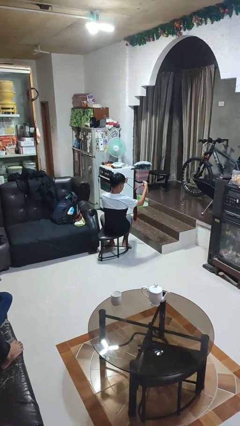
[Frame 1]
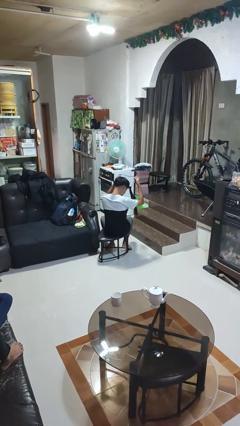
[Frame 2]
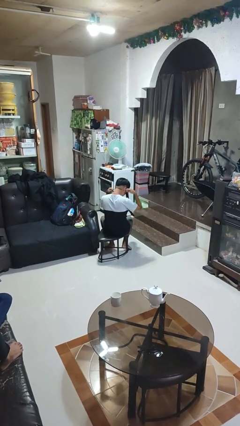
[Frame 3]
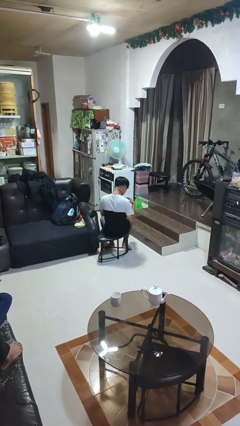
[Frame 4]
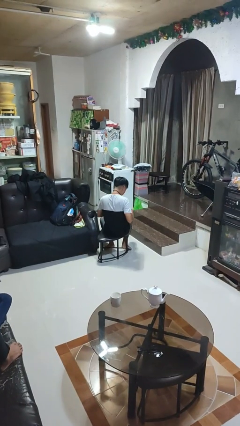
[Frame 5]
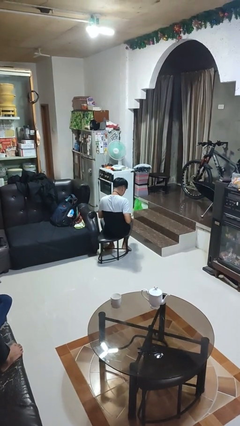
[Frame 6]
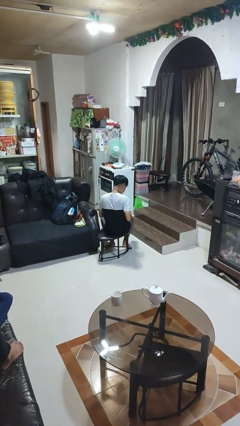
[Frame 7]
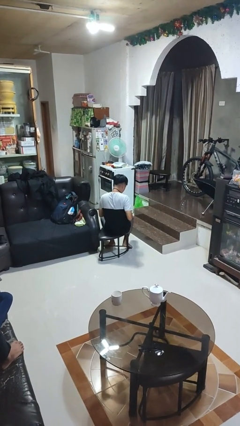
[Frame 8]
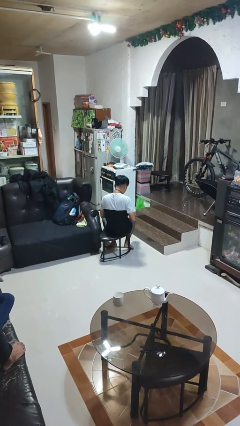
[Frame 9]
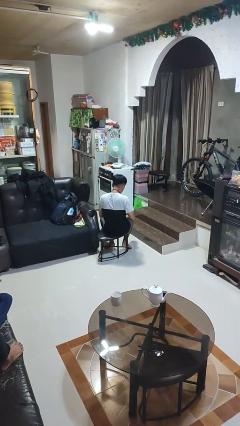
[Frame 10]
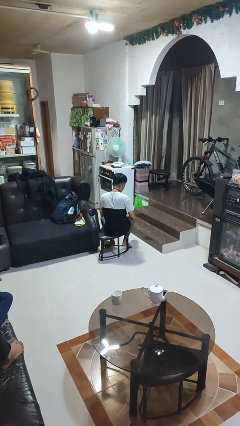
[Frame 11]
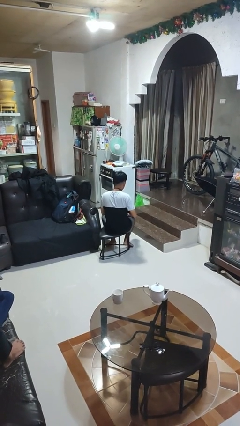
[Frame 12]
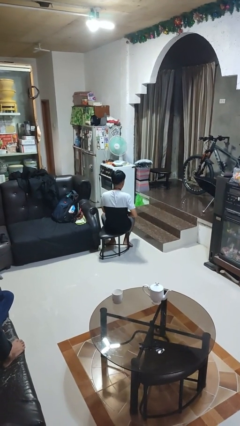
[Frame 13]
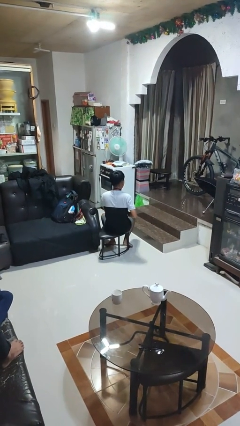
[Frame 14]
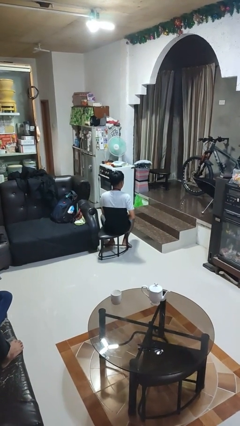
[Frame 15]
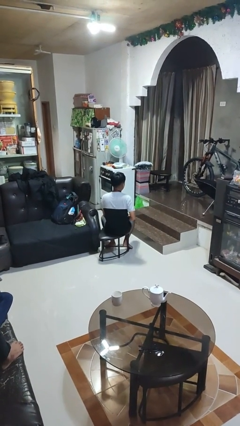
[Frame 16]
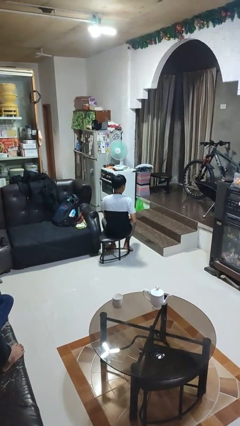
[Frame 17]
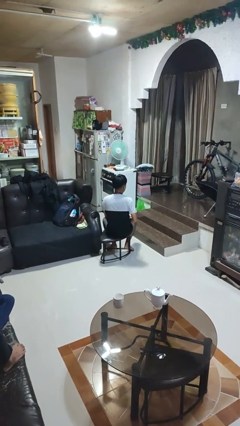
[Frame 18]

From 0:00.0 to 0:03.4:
person puts on necktie

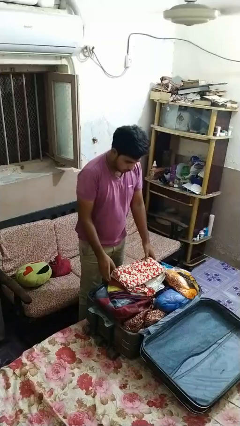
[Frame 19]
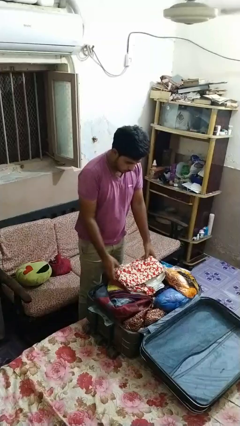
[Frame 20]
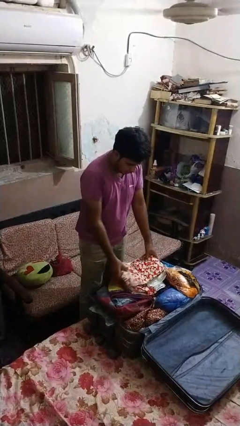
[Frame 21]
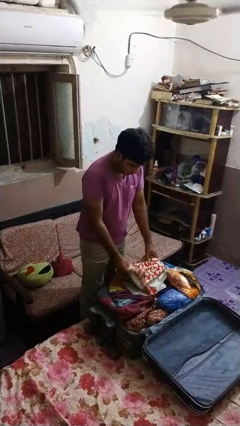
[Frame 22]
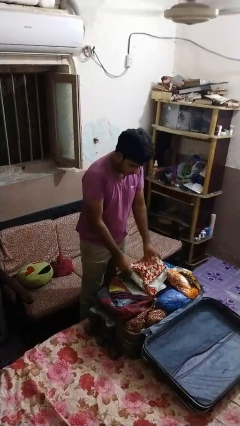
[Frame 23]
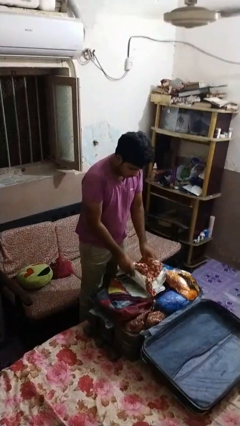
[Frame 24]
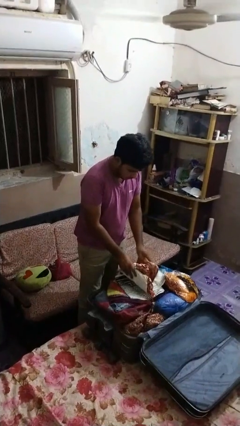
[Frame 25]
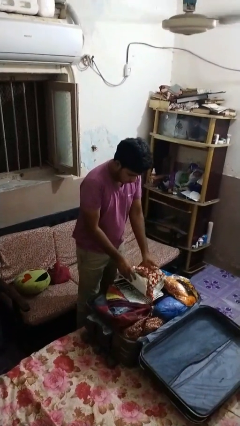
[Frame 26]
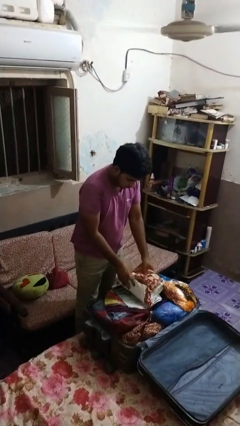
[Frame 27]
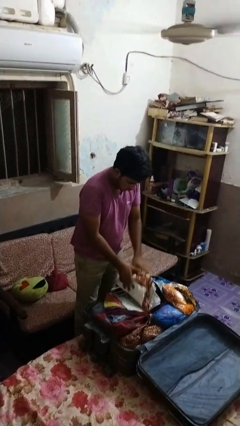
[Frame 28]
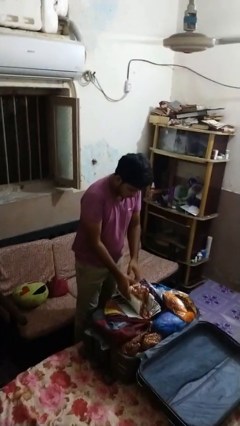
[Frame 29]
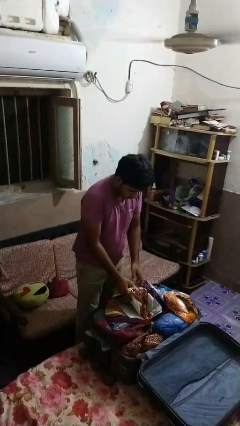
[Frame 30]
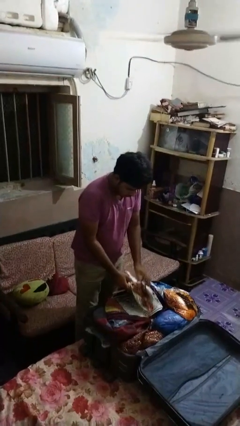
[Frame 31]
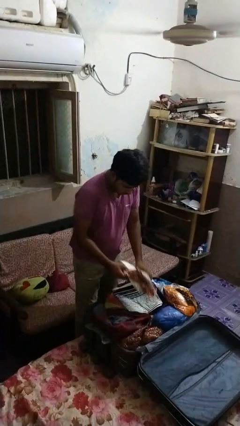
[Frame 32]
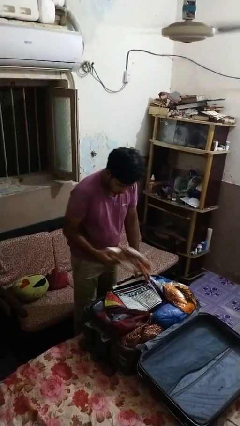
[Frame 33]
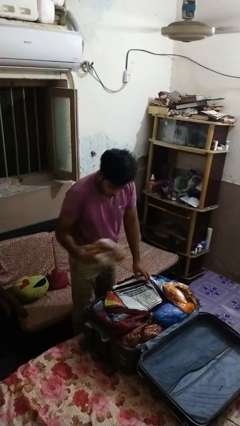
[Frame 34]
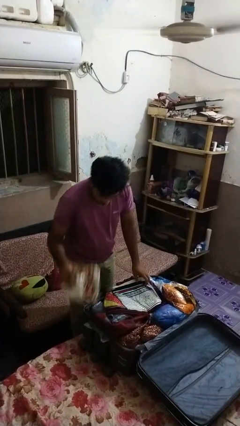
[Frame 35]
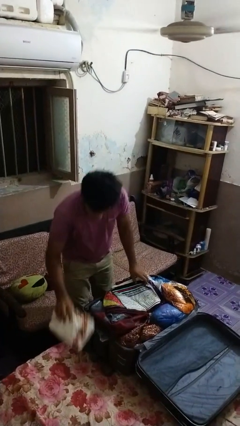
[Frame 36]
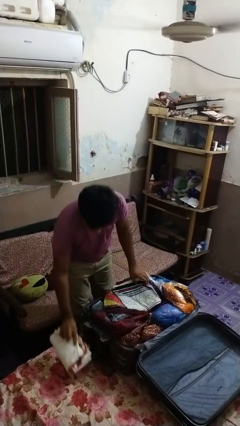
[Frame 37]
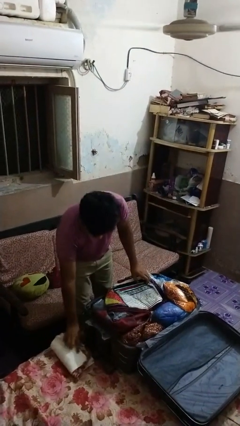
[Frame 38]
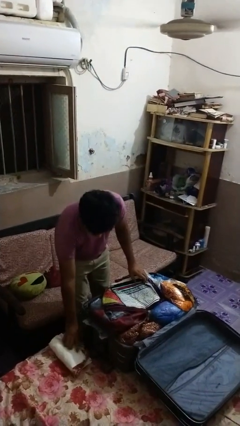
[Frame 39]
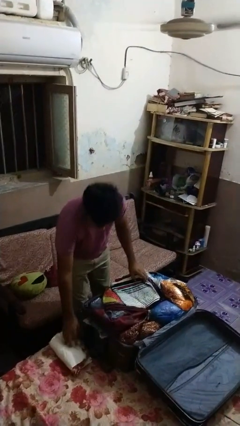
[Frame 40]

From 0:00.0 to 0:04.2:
person unloads clothes from suitcase

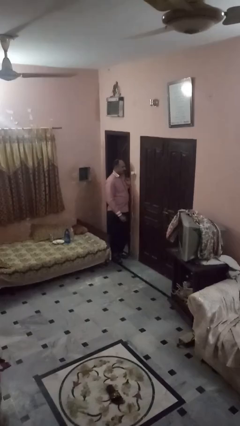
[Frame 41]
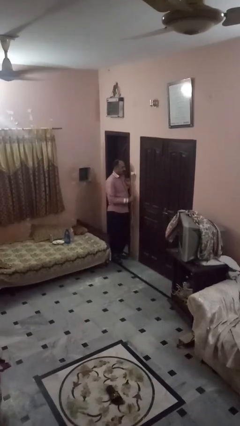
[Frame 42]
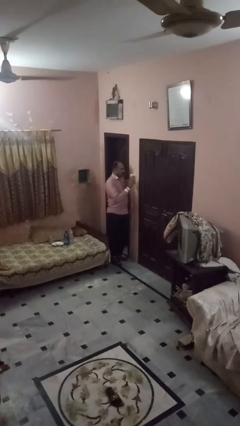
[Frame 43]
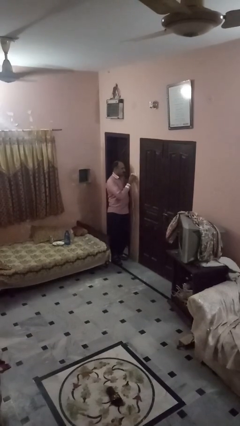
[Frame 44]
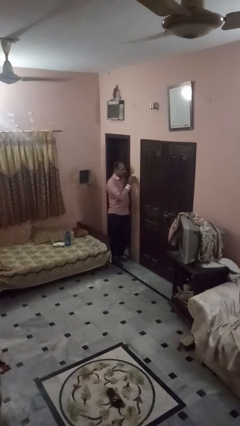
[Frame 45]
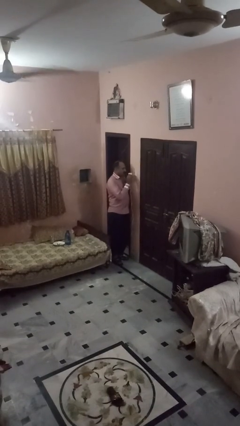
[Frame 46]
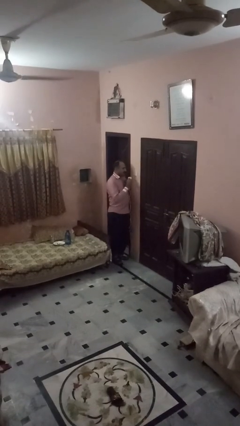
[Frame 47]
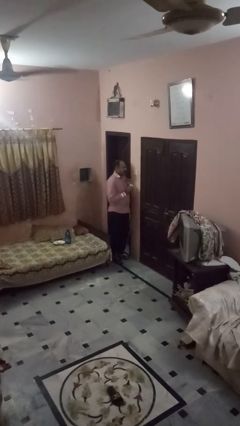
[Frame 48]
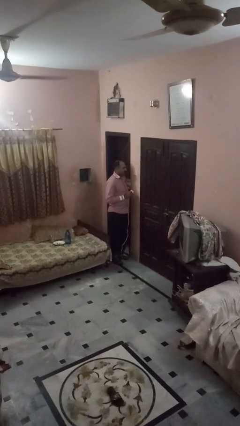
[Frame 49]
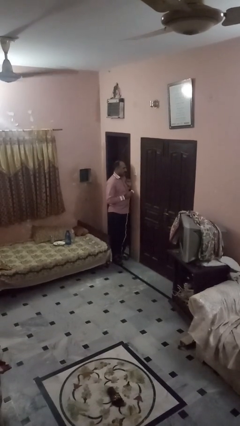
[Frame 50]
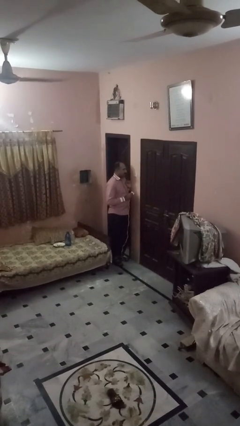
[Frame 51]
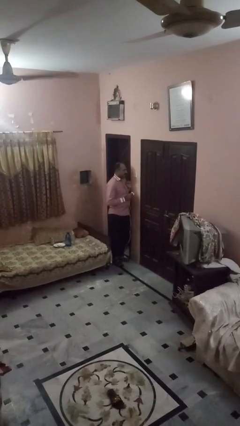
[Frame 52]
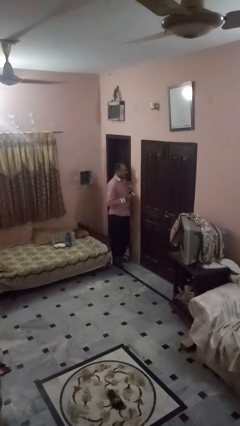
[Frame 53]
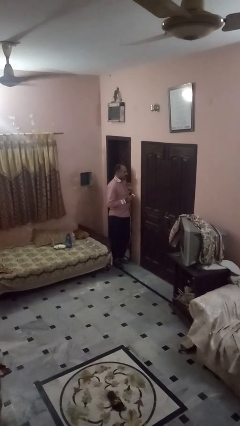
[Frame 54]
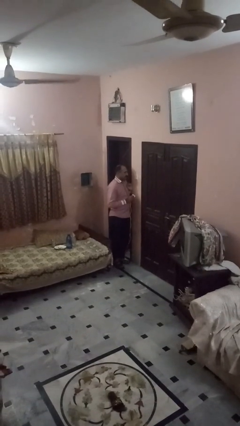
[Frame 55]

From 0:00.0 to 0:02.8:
person unplugs from electrical socket

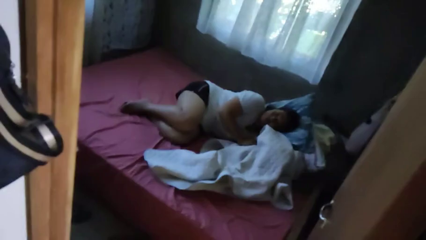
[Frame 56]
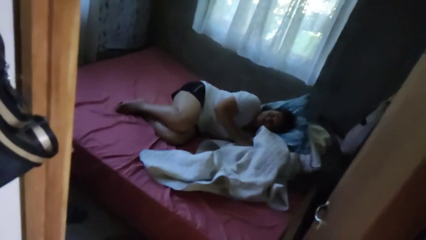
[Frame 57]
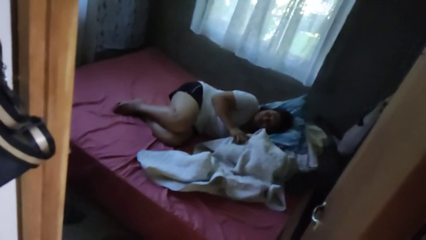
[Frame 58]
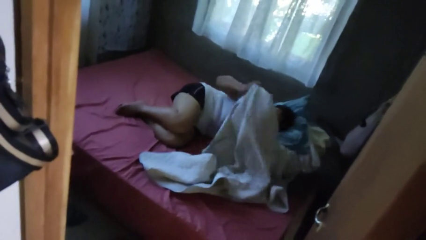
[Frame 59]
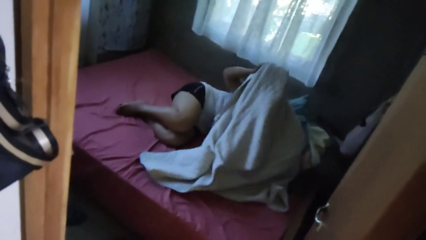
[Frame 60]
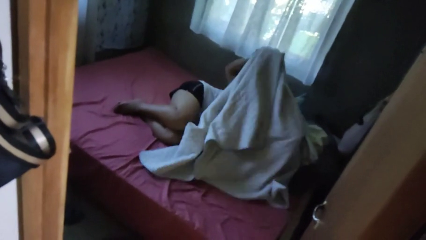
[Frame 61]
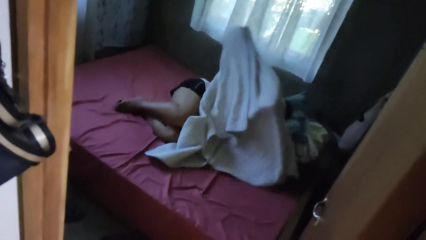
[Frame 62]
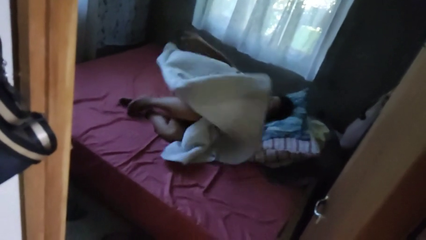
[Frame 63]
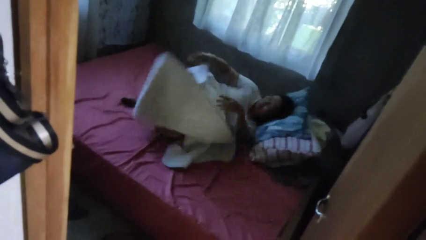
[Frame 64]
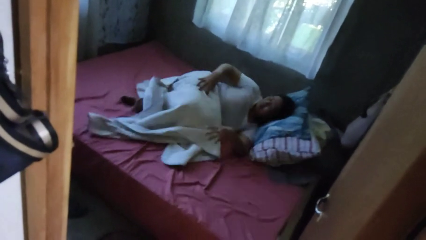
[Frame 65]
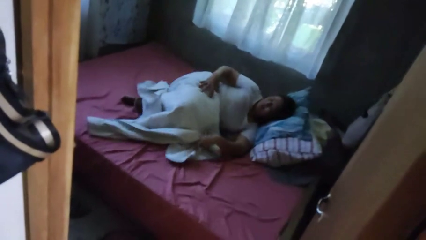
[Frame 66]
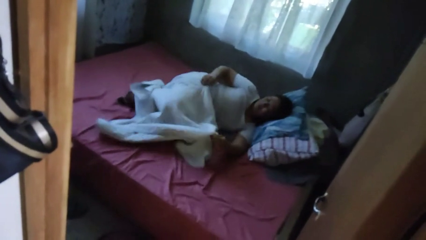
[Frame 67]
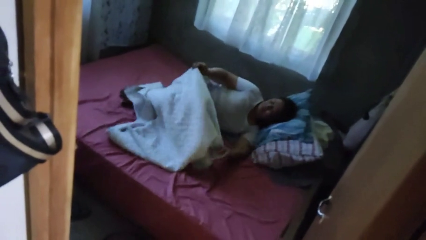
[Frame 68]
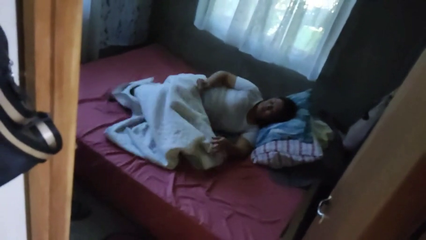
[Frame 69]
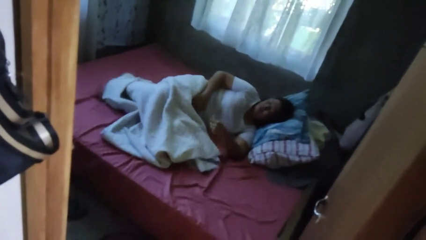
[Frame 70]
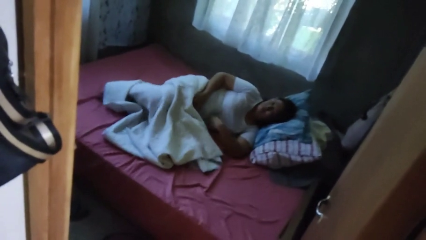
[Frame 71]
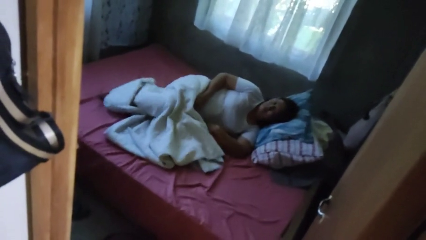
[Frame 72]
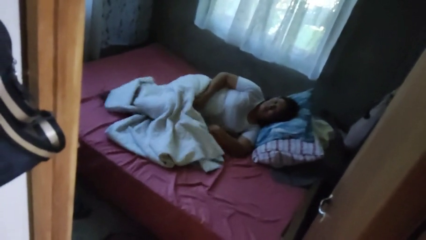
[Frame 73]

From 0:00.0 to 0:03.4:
person covers with bedsheets

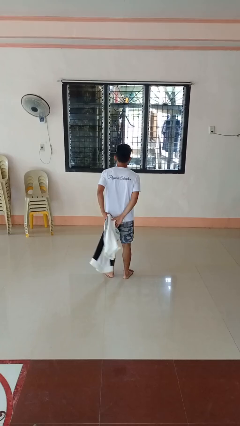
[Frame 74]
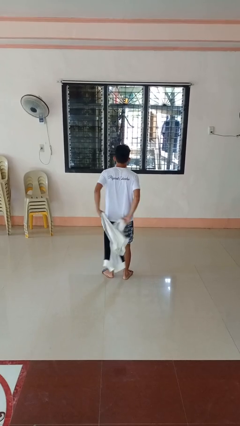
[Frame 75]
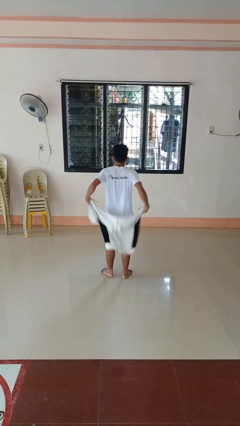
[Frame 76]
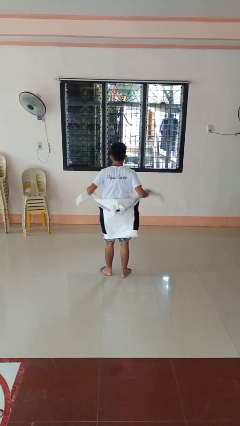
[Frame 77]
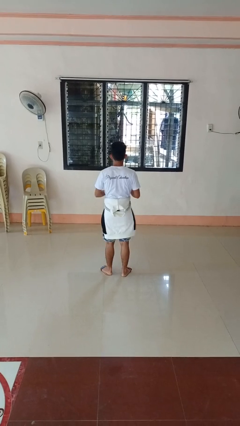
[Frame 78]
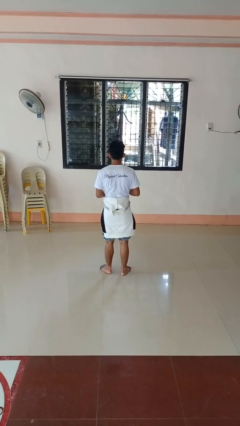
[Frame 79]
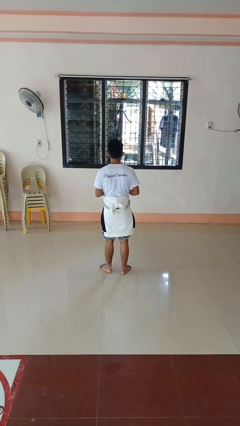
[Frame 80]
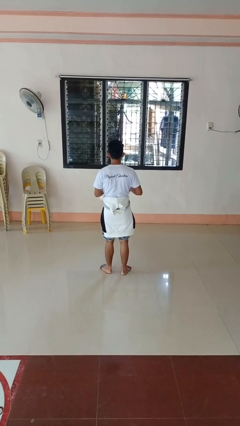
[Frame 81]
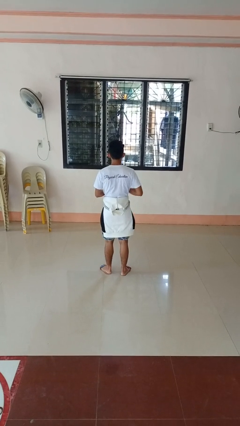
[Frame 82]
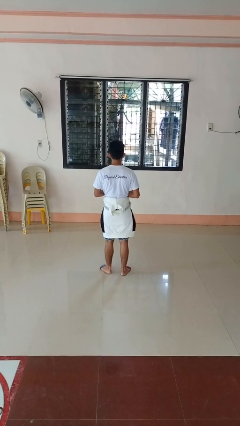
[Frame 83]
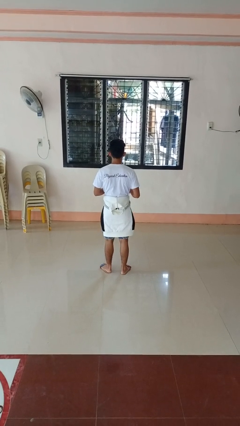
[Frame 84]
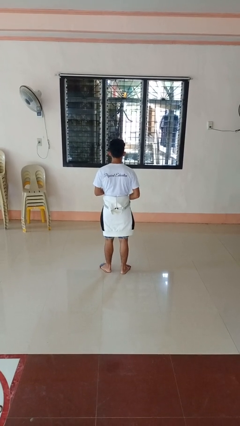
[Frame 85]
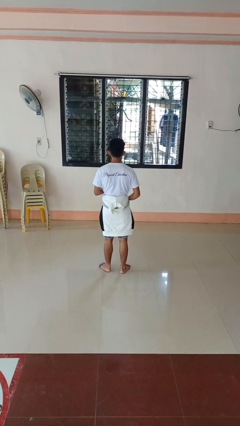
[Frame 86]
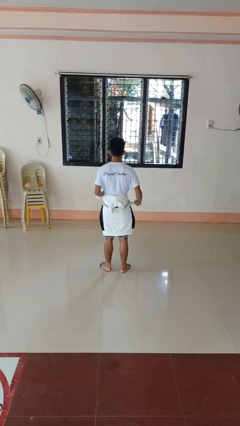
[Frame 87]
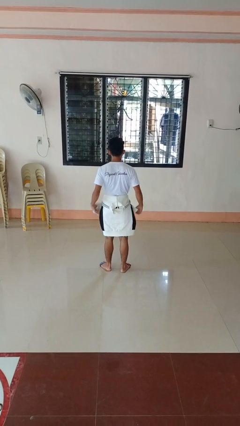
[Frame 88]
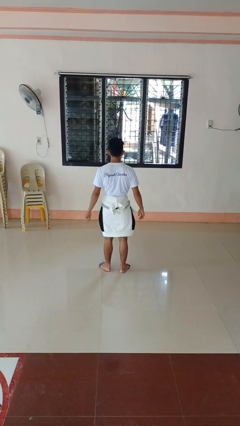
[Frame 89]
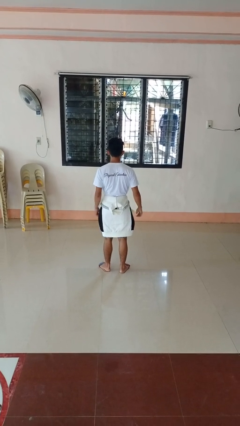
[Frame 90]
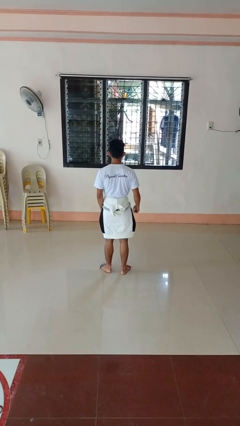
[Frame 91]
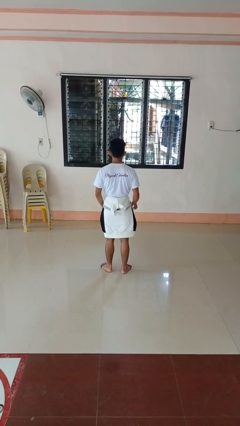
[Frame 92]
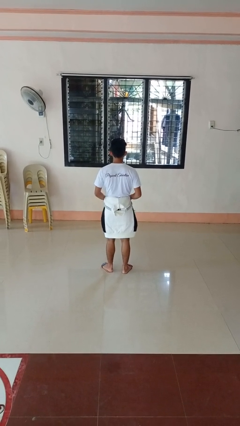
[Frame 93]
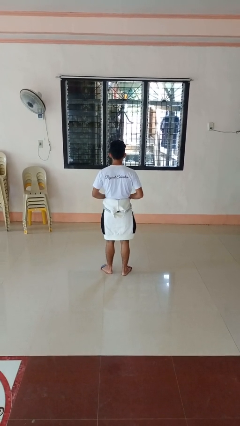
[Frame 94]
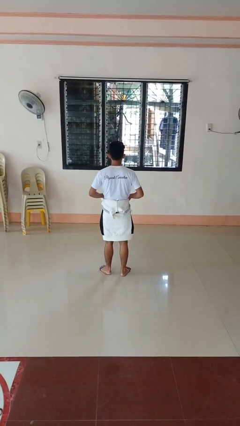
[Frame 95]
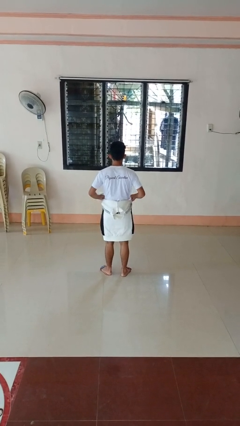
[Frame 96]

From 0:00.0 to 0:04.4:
person ties jacket around waist
